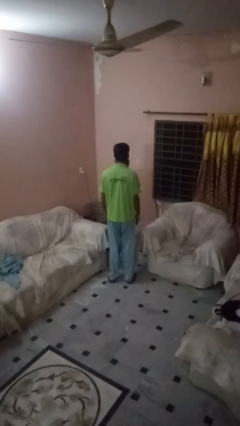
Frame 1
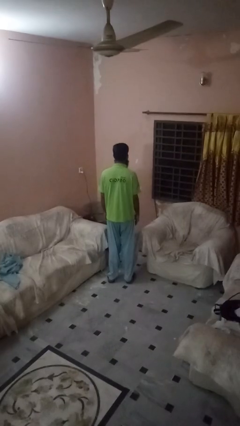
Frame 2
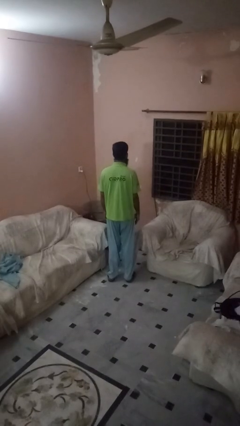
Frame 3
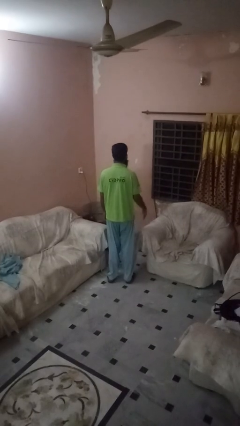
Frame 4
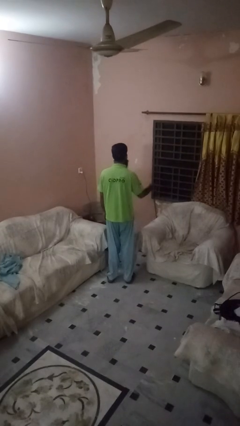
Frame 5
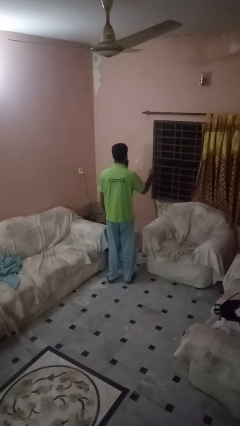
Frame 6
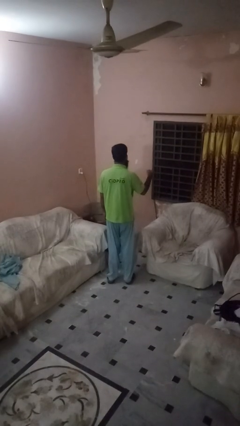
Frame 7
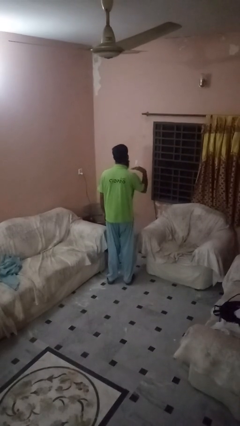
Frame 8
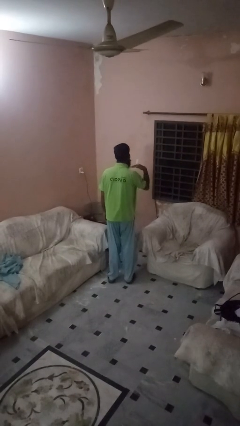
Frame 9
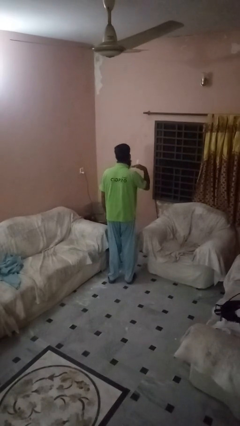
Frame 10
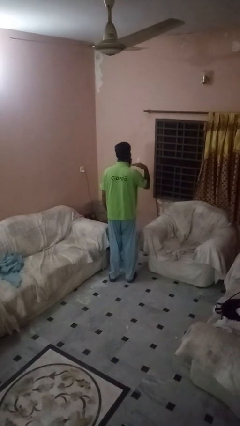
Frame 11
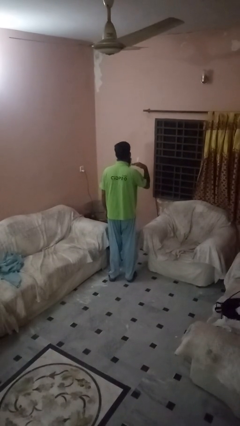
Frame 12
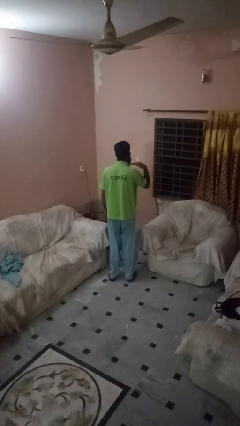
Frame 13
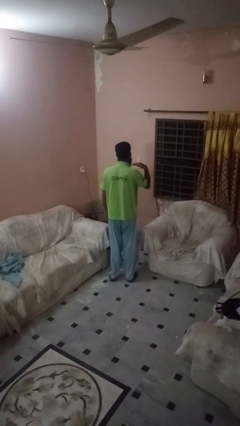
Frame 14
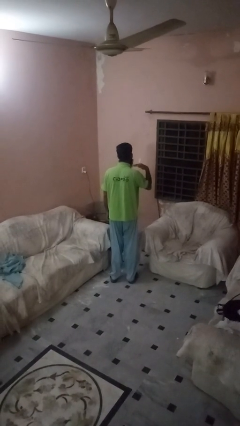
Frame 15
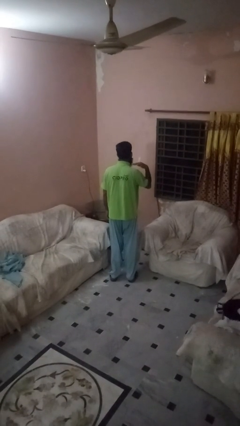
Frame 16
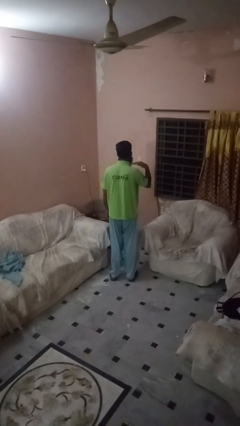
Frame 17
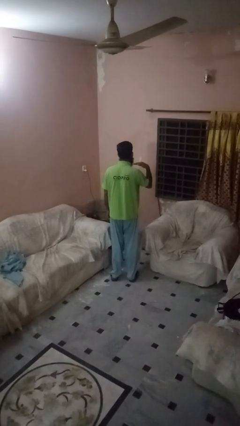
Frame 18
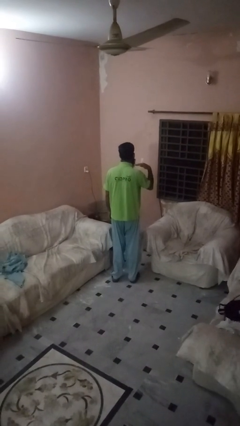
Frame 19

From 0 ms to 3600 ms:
person gestures cut

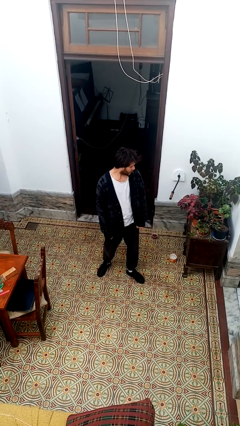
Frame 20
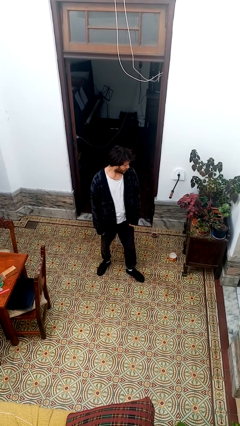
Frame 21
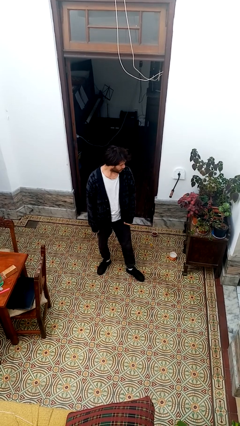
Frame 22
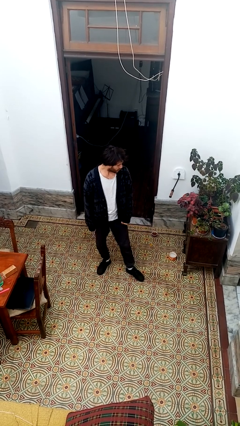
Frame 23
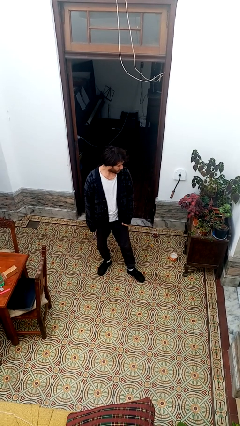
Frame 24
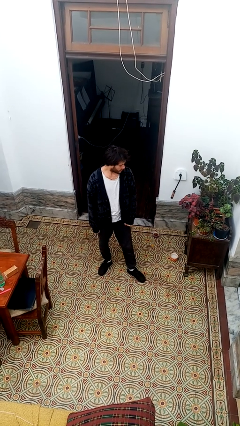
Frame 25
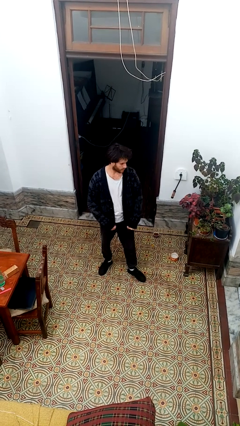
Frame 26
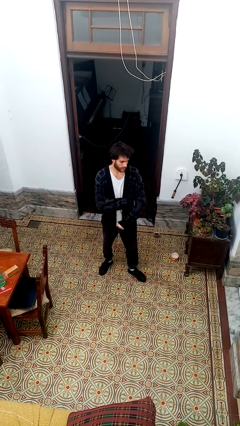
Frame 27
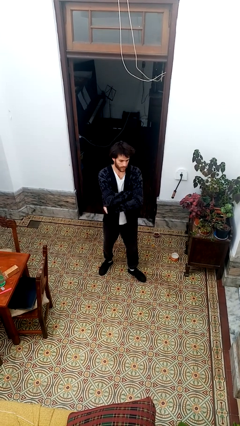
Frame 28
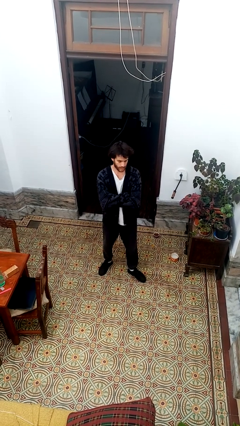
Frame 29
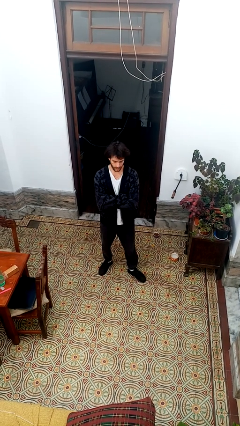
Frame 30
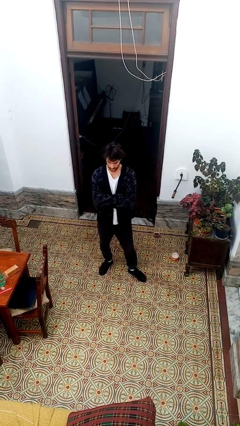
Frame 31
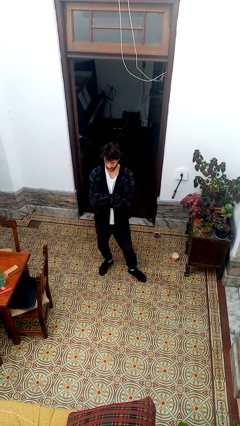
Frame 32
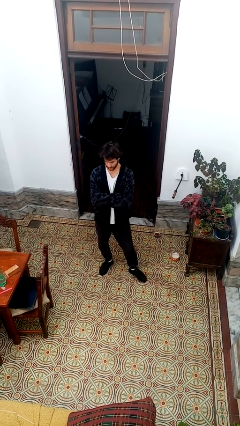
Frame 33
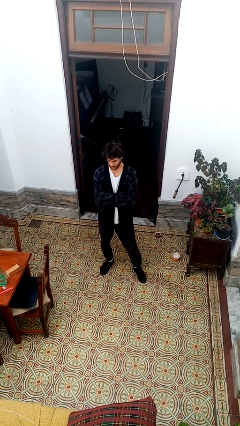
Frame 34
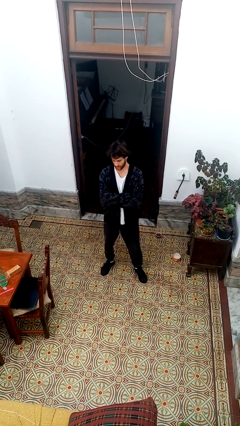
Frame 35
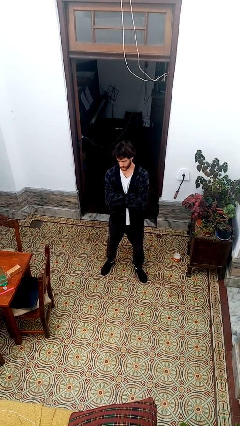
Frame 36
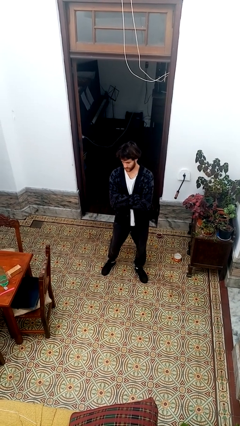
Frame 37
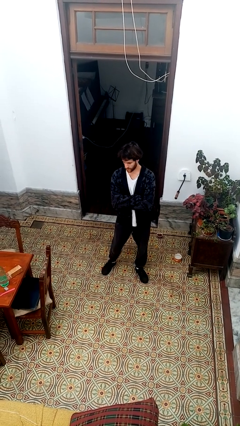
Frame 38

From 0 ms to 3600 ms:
person crosses arms

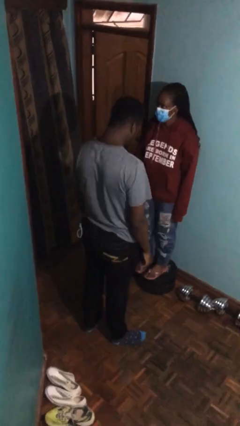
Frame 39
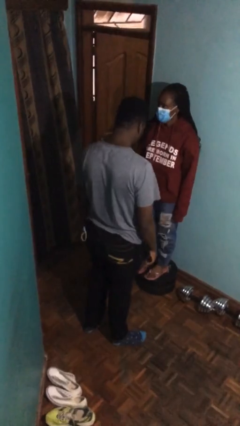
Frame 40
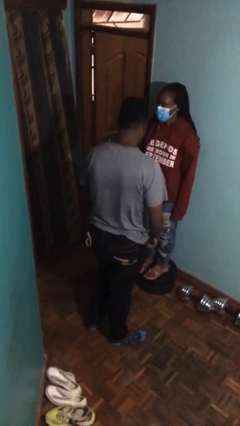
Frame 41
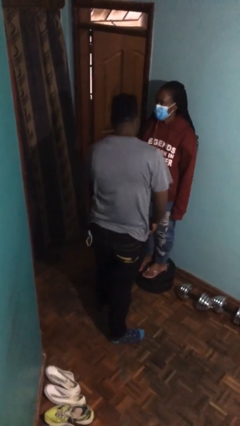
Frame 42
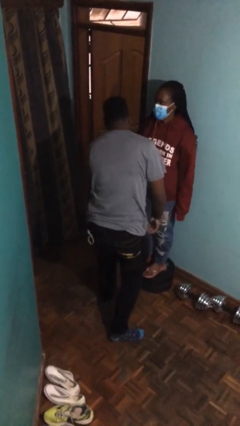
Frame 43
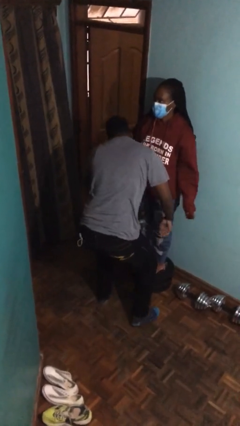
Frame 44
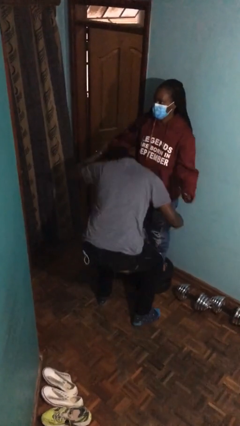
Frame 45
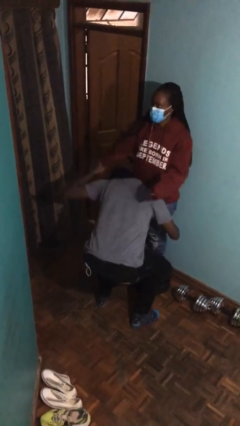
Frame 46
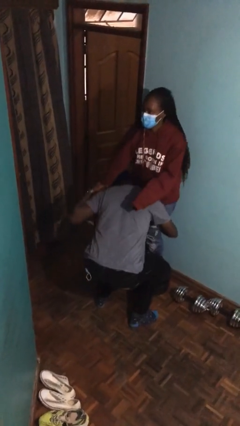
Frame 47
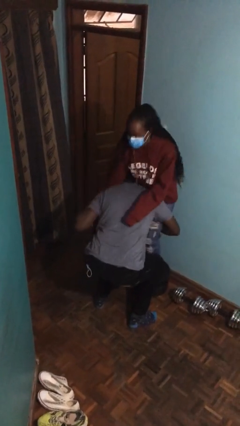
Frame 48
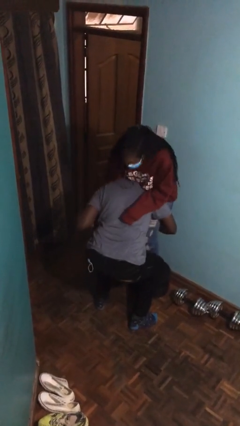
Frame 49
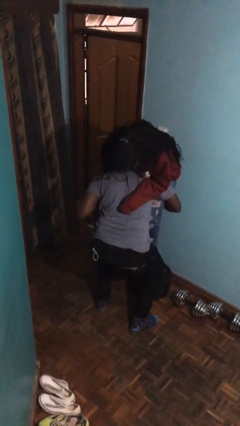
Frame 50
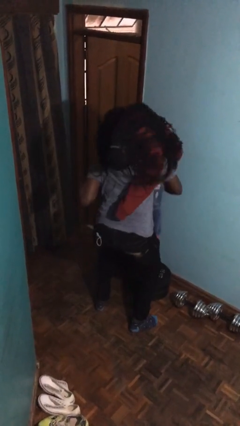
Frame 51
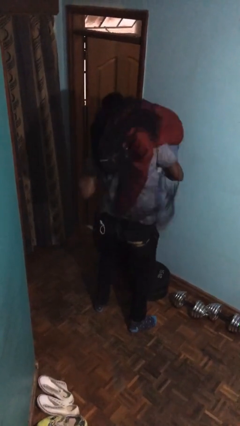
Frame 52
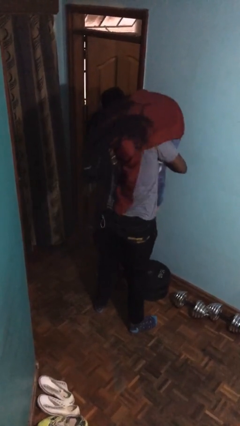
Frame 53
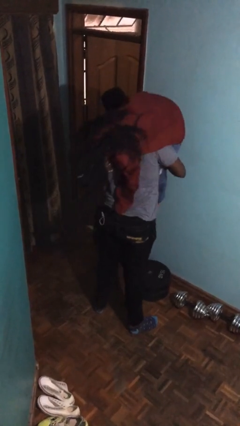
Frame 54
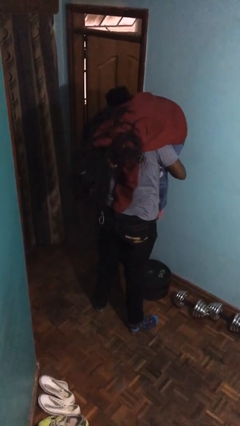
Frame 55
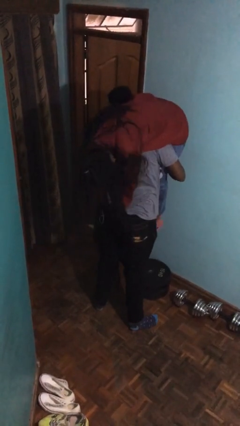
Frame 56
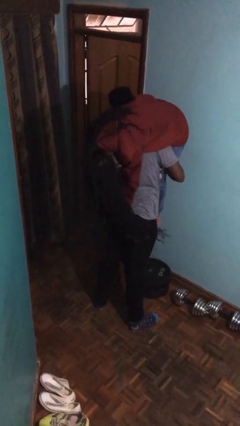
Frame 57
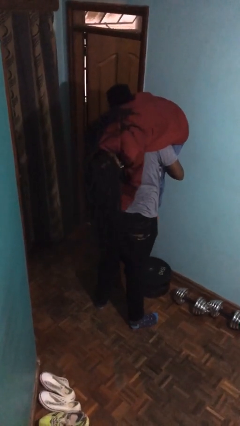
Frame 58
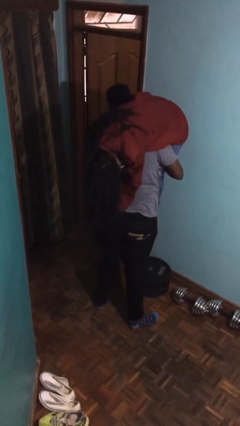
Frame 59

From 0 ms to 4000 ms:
person carries person over shoulder

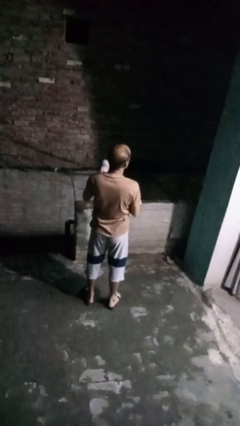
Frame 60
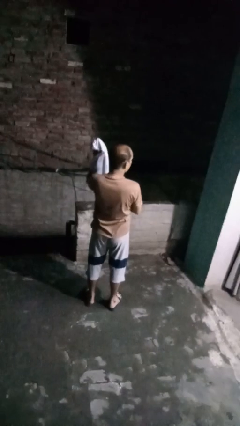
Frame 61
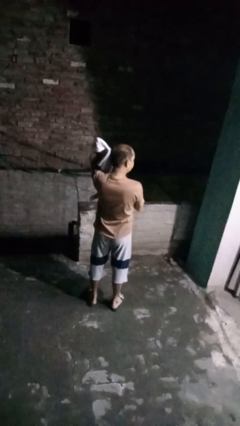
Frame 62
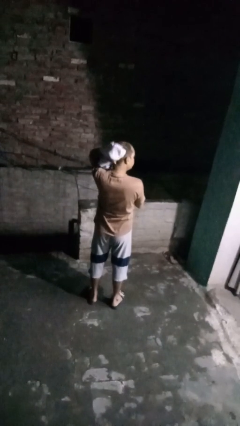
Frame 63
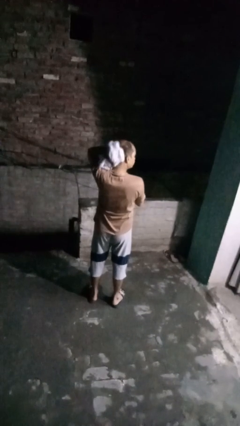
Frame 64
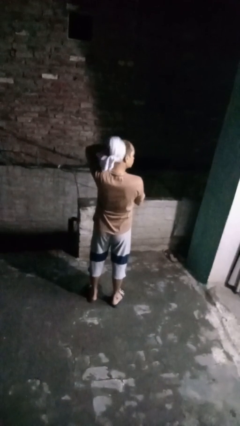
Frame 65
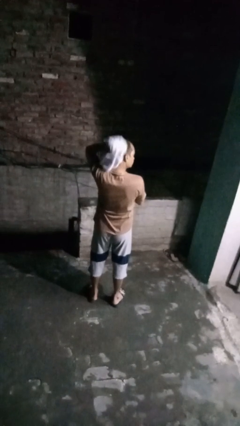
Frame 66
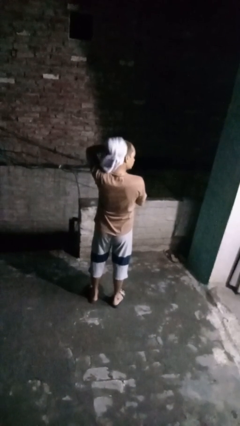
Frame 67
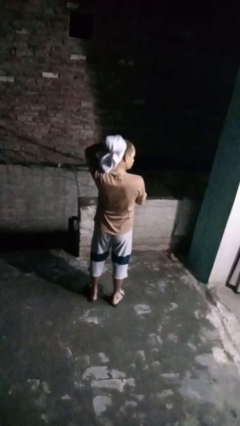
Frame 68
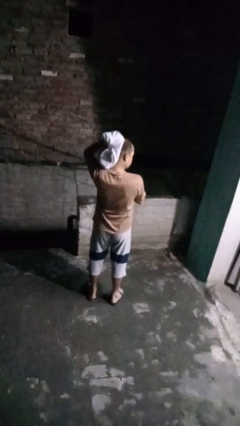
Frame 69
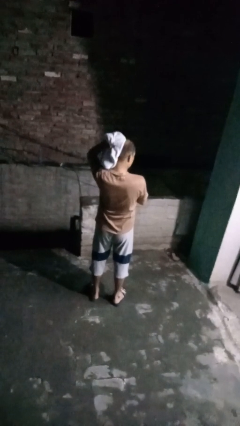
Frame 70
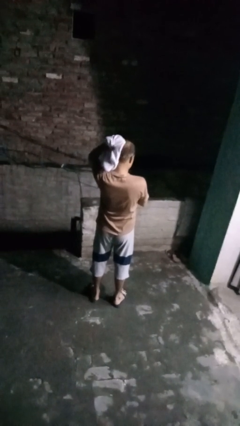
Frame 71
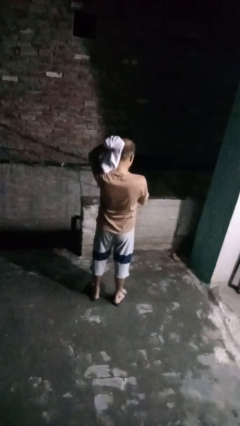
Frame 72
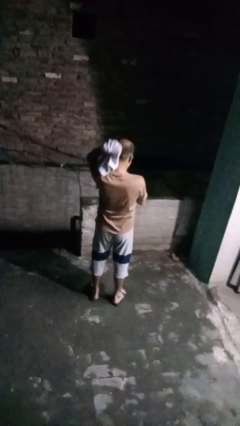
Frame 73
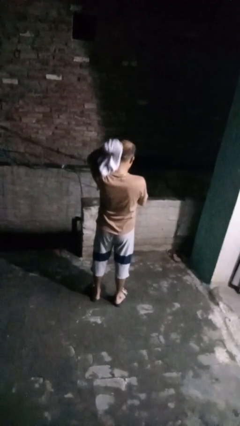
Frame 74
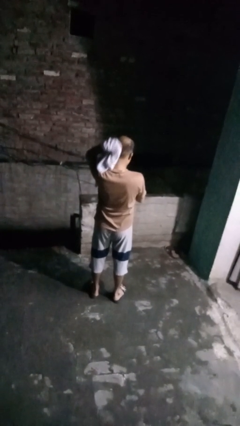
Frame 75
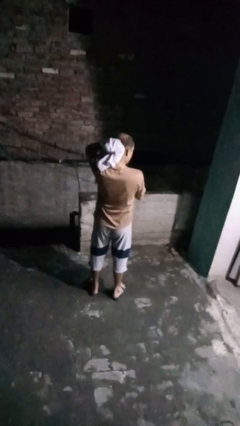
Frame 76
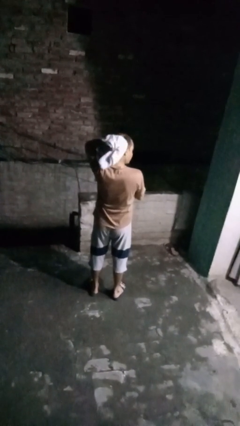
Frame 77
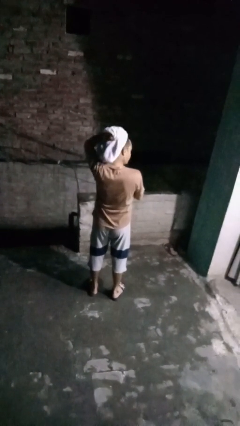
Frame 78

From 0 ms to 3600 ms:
person dries hair with towel

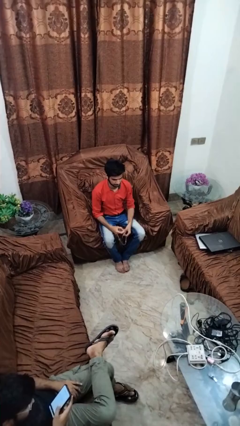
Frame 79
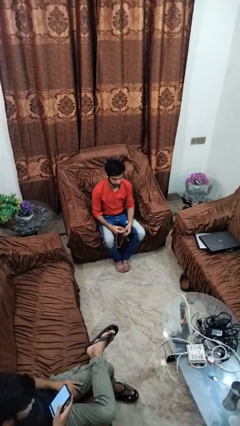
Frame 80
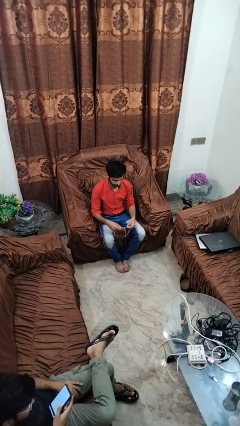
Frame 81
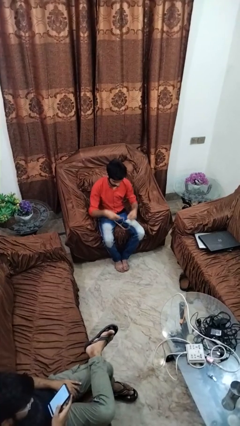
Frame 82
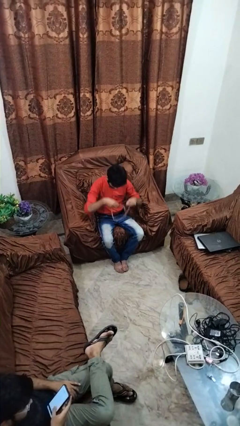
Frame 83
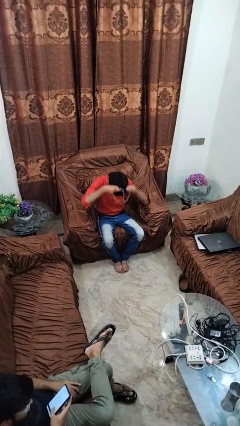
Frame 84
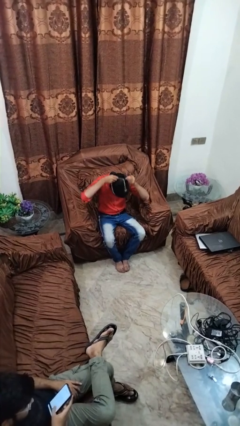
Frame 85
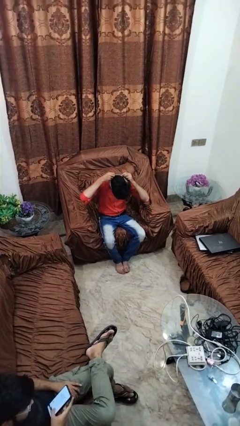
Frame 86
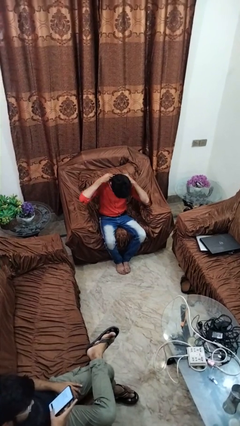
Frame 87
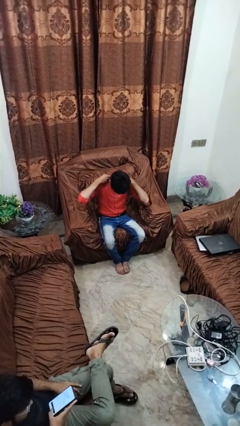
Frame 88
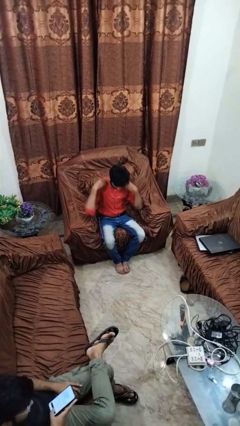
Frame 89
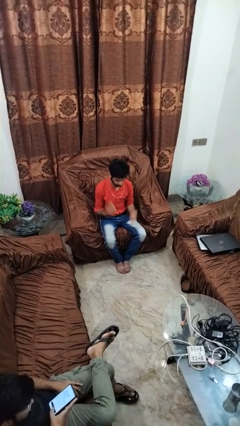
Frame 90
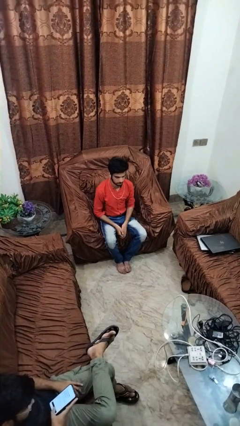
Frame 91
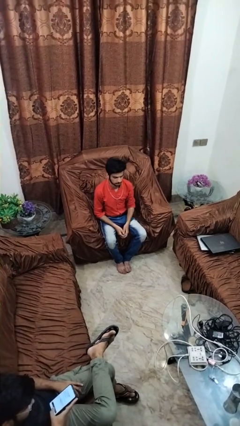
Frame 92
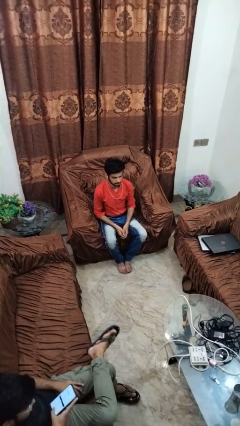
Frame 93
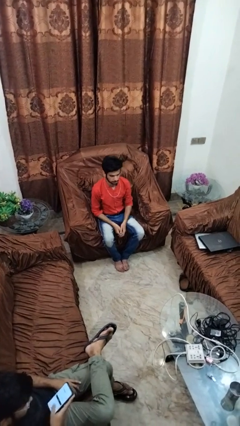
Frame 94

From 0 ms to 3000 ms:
person puts on necklace
